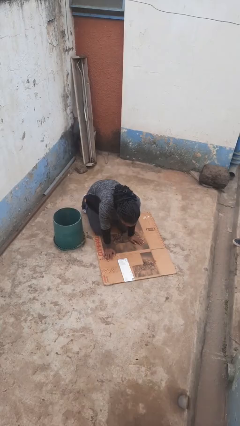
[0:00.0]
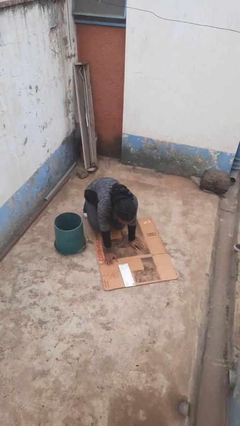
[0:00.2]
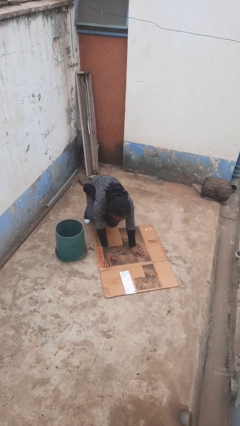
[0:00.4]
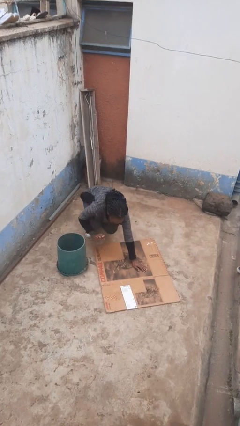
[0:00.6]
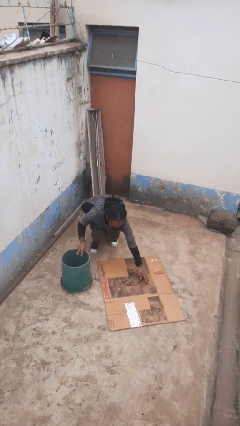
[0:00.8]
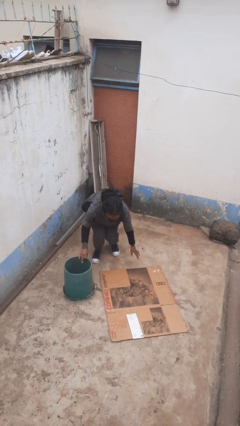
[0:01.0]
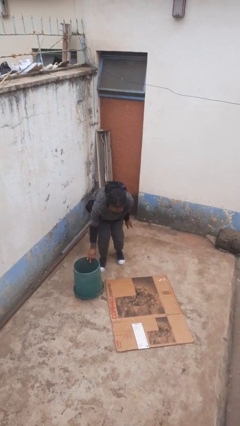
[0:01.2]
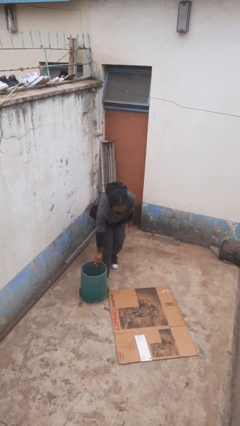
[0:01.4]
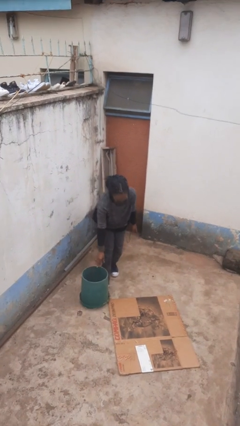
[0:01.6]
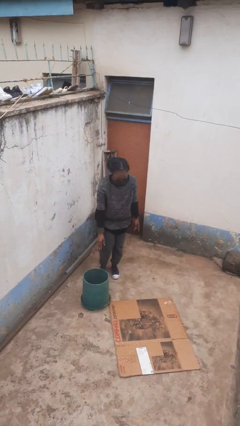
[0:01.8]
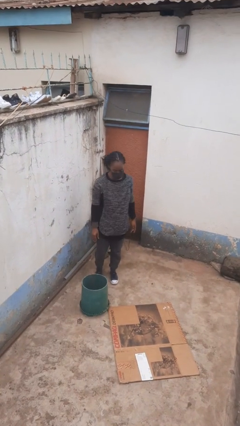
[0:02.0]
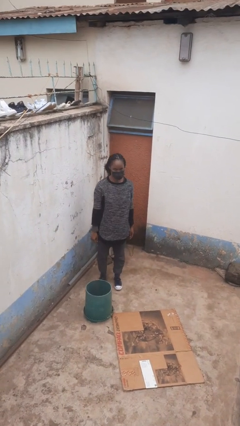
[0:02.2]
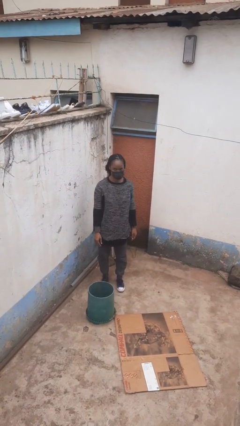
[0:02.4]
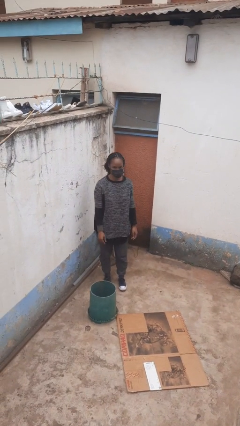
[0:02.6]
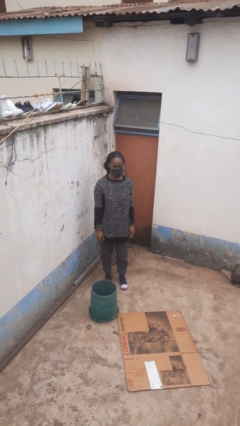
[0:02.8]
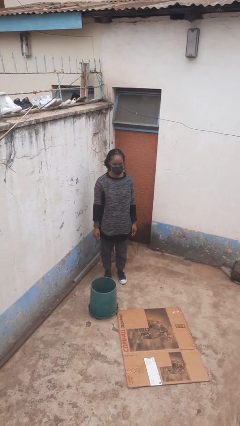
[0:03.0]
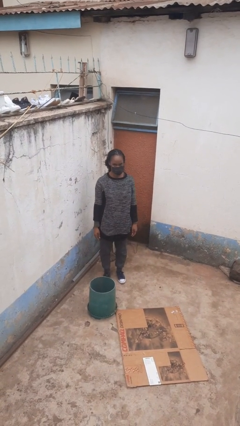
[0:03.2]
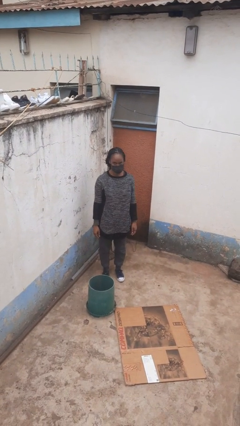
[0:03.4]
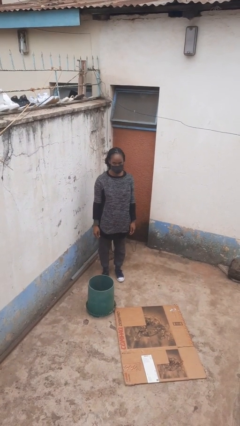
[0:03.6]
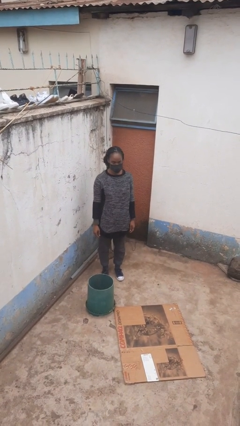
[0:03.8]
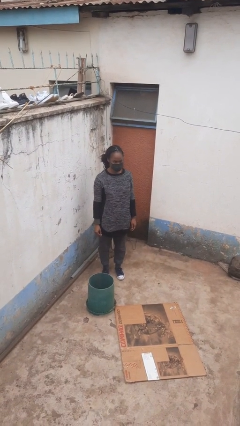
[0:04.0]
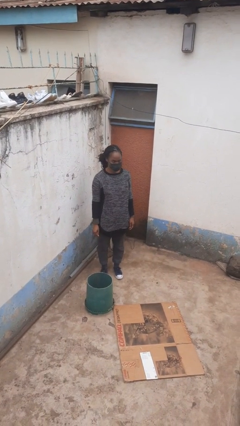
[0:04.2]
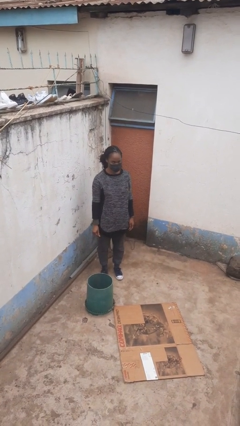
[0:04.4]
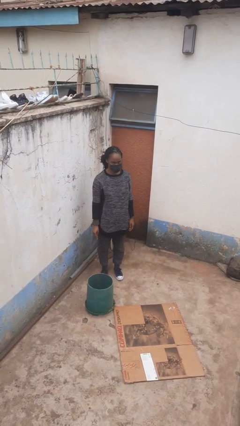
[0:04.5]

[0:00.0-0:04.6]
person stands up from floor

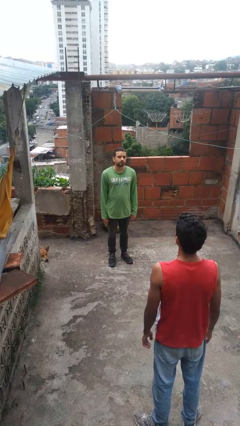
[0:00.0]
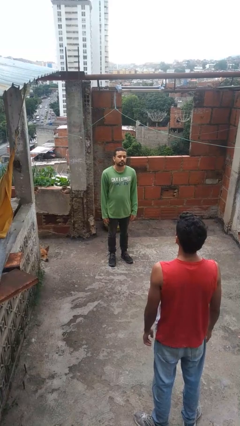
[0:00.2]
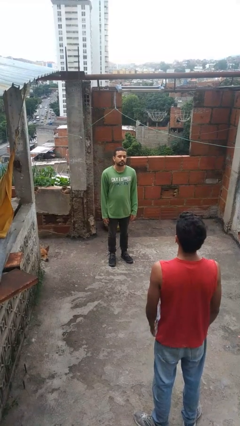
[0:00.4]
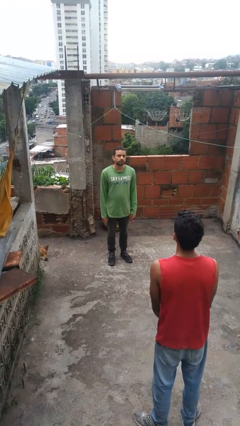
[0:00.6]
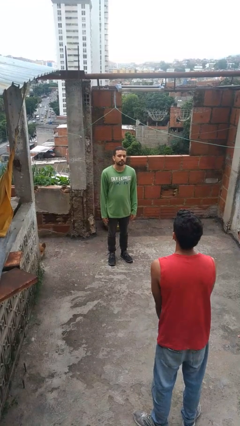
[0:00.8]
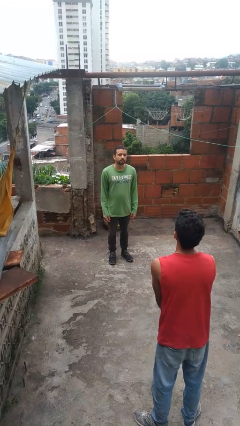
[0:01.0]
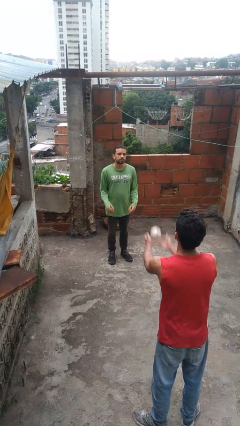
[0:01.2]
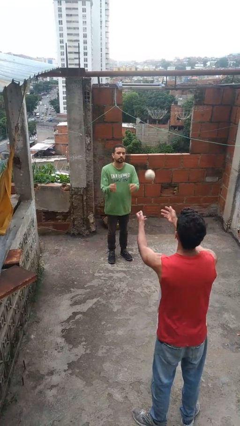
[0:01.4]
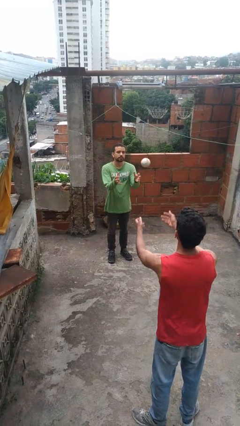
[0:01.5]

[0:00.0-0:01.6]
person catches object from person

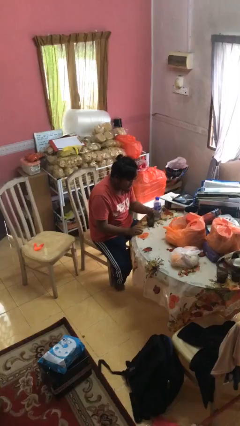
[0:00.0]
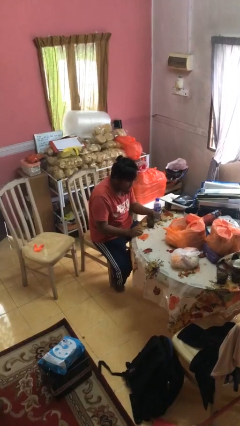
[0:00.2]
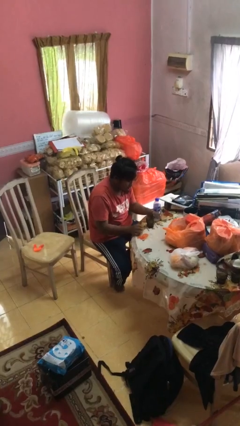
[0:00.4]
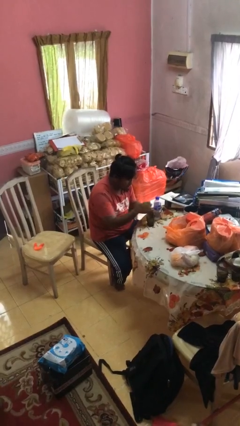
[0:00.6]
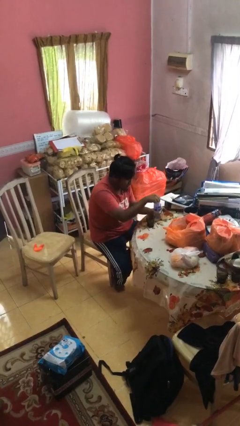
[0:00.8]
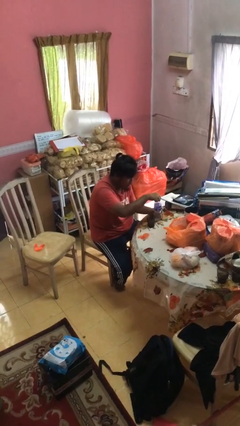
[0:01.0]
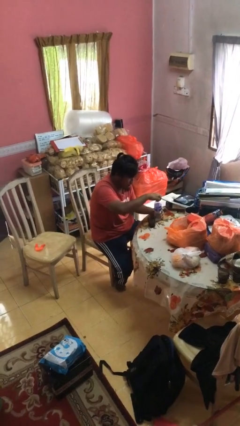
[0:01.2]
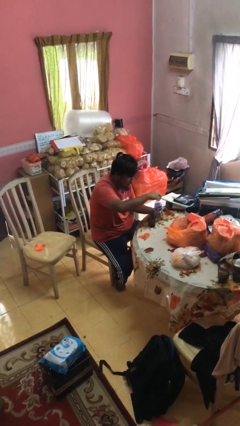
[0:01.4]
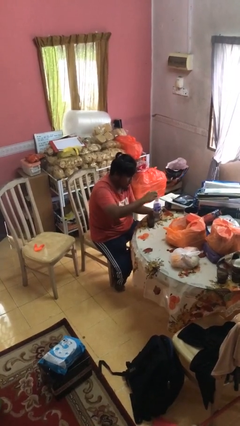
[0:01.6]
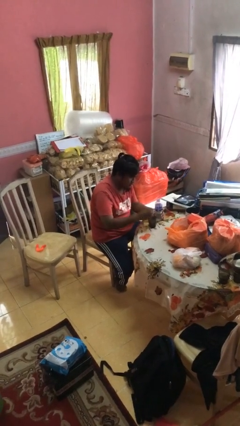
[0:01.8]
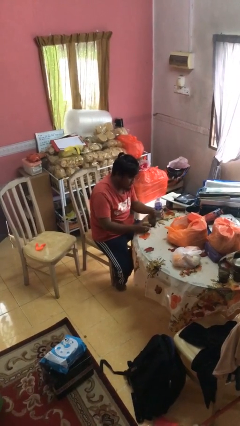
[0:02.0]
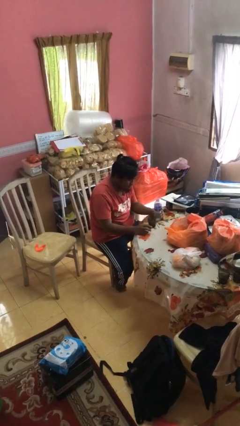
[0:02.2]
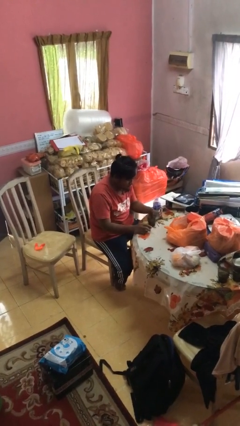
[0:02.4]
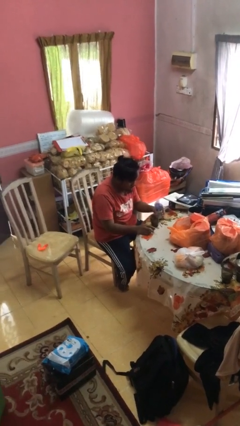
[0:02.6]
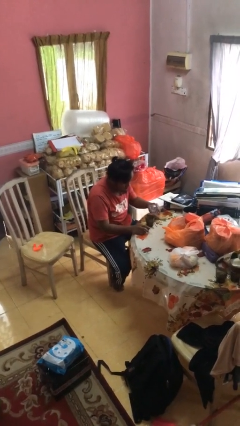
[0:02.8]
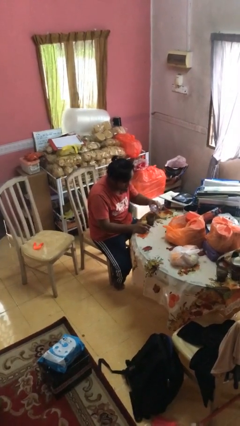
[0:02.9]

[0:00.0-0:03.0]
person unscrews lid from bottle

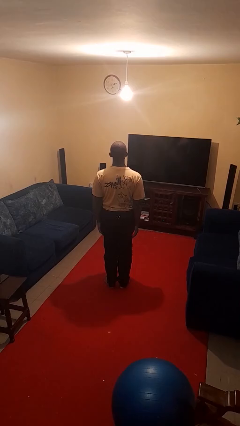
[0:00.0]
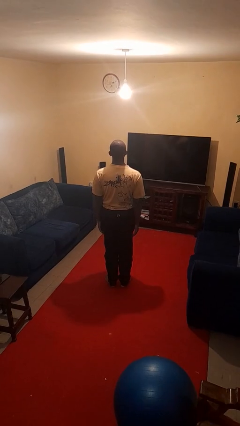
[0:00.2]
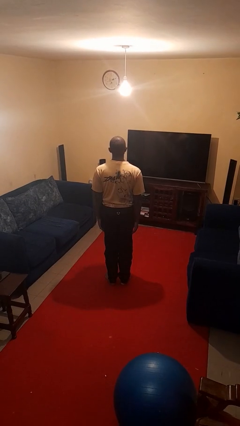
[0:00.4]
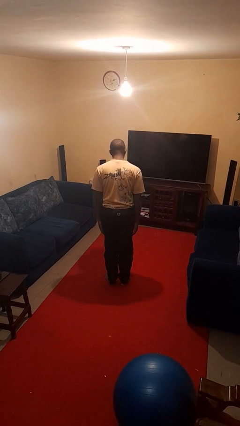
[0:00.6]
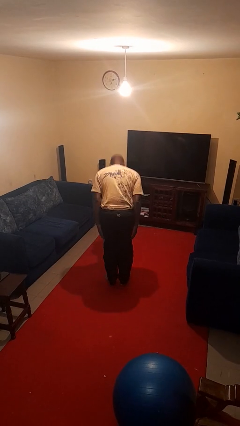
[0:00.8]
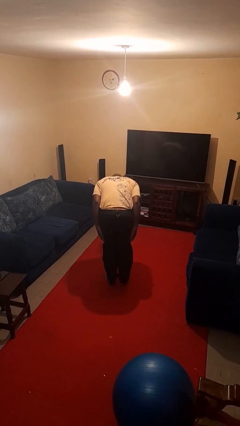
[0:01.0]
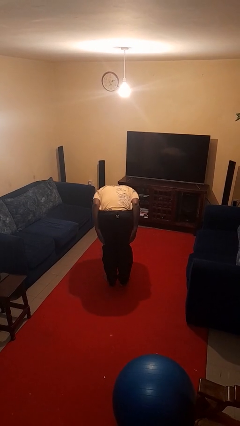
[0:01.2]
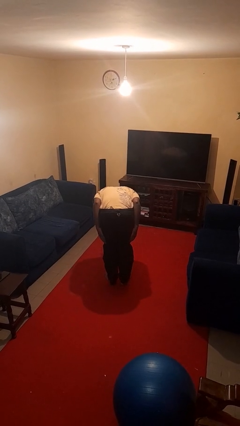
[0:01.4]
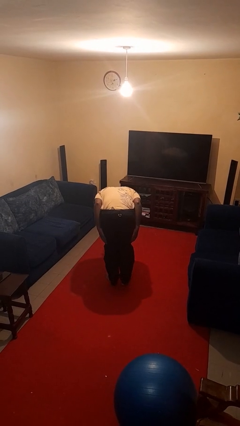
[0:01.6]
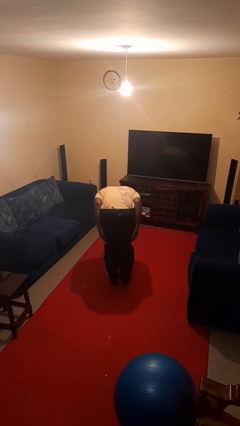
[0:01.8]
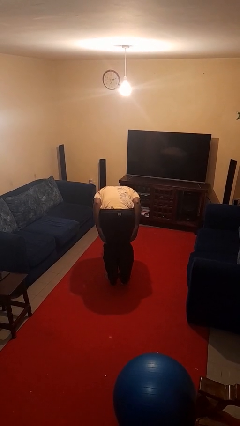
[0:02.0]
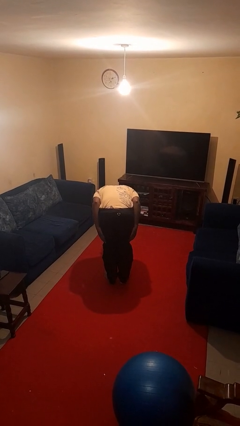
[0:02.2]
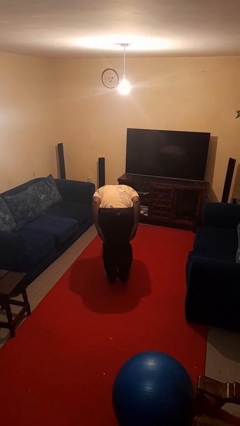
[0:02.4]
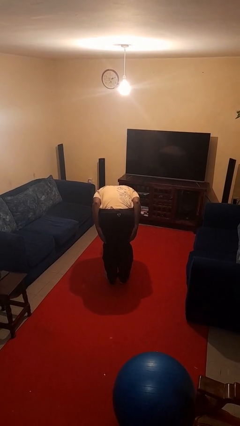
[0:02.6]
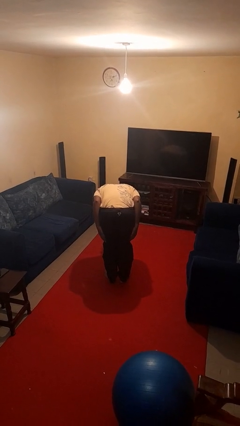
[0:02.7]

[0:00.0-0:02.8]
person bows

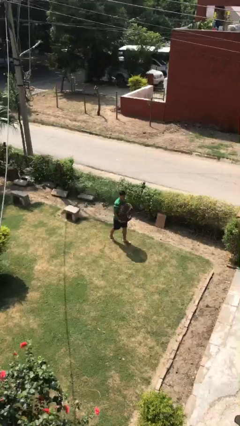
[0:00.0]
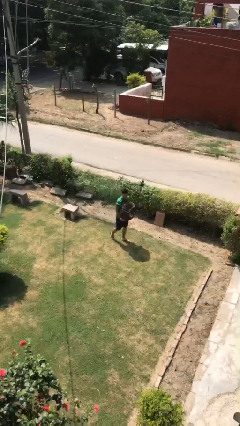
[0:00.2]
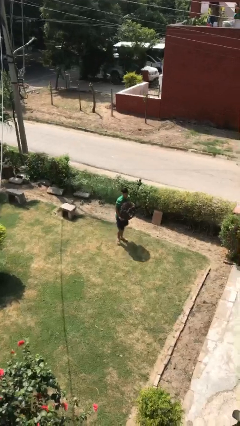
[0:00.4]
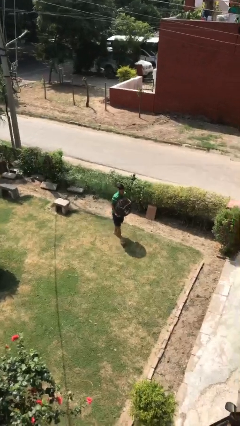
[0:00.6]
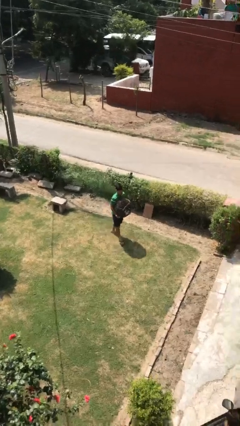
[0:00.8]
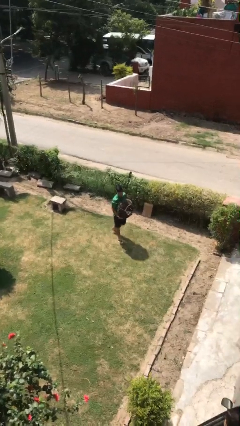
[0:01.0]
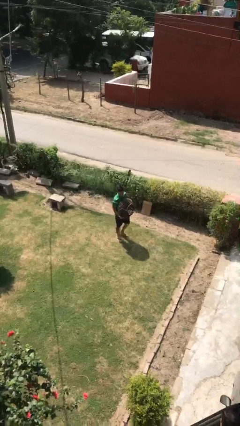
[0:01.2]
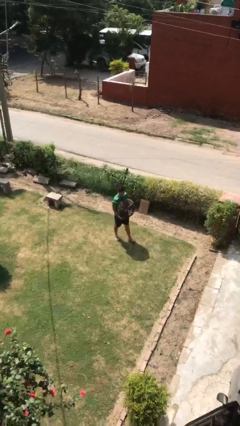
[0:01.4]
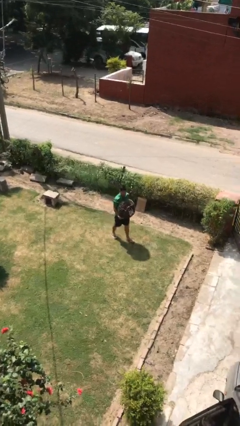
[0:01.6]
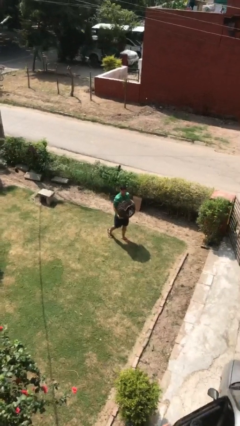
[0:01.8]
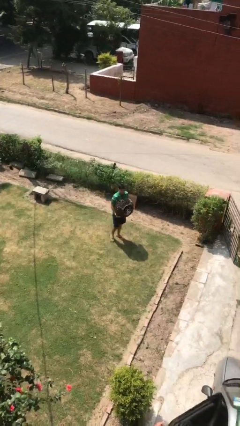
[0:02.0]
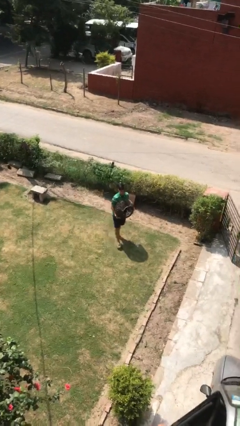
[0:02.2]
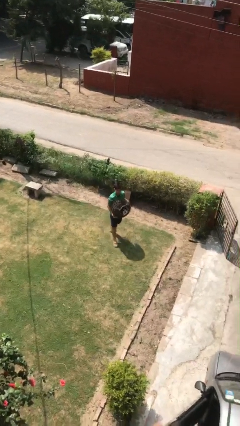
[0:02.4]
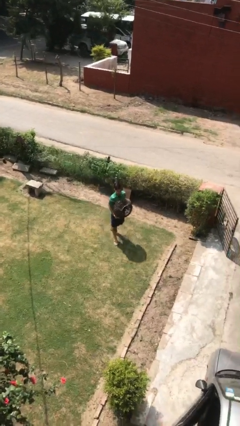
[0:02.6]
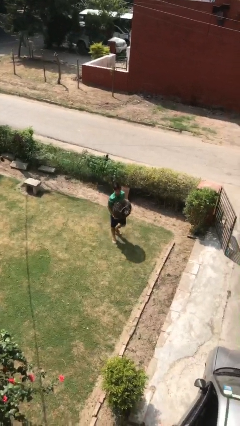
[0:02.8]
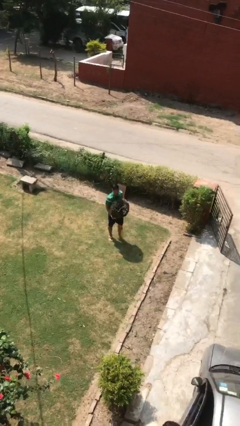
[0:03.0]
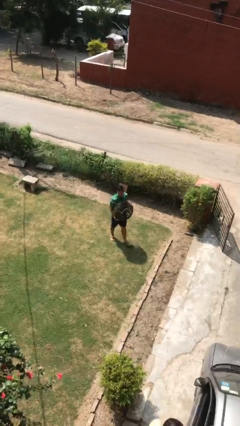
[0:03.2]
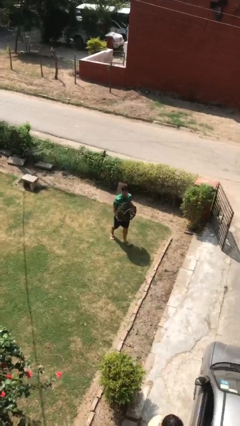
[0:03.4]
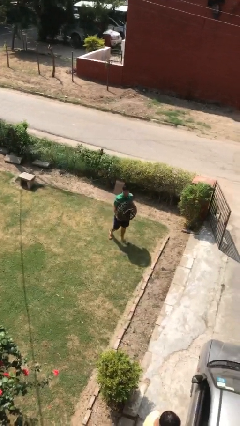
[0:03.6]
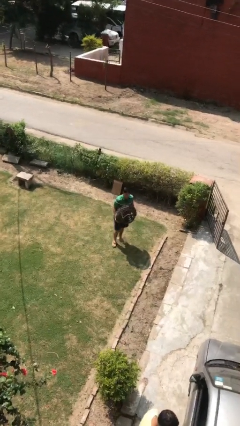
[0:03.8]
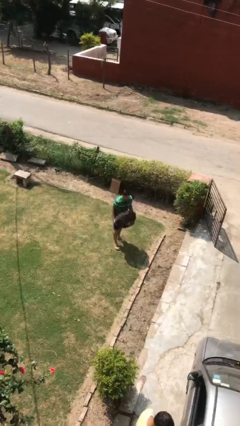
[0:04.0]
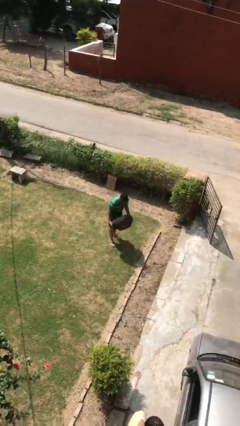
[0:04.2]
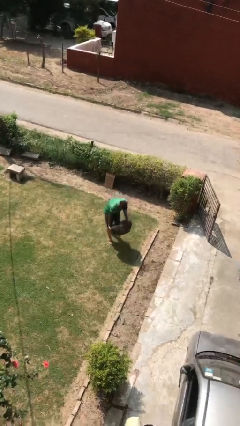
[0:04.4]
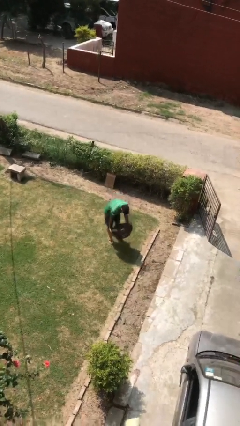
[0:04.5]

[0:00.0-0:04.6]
person carries heavy object

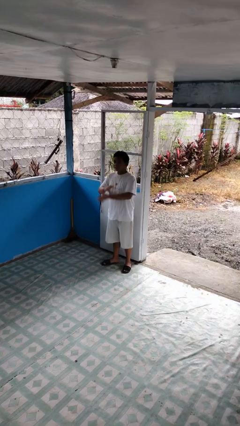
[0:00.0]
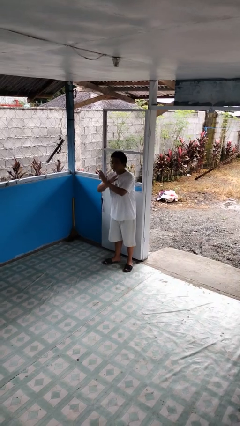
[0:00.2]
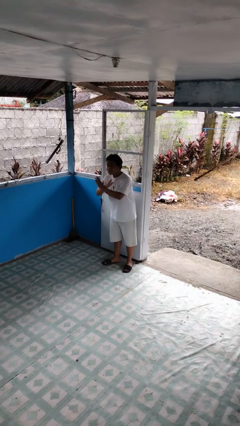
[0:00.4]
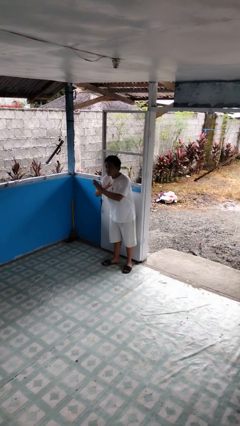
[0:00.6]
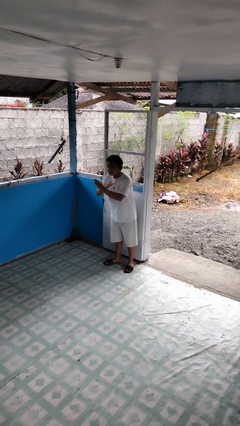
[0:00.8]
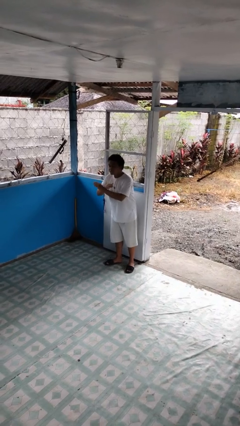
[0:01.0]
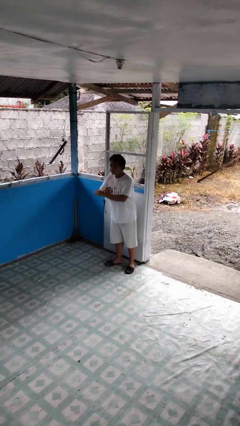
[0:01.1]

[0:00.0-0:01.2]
person gestures arms x
